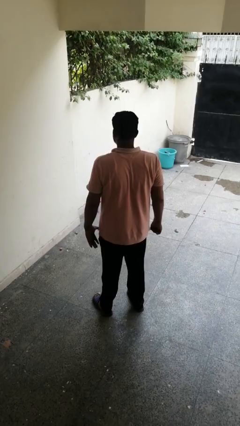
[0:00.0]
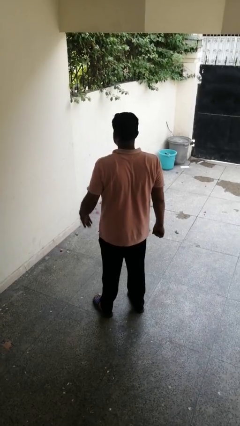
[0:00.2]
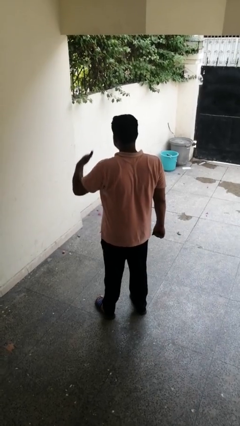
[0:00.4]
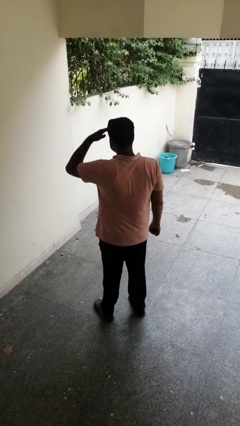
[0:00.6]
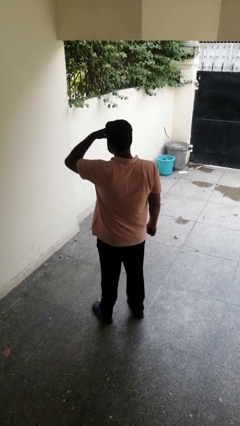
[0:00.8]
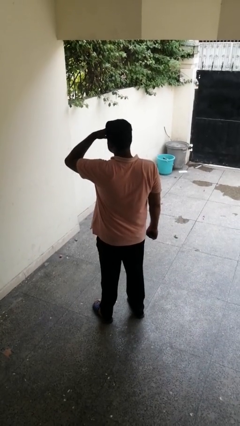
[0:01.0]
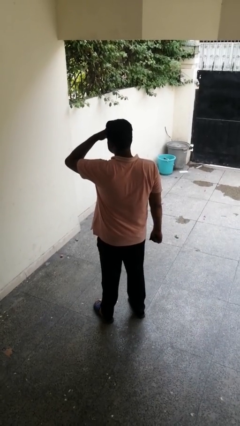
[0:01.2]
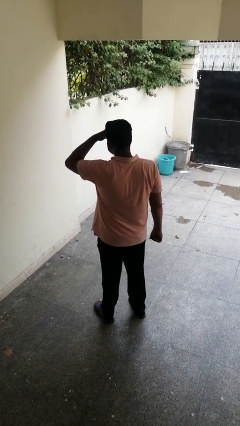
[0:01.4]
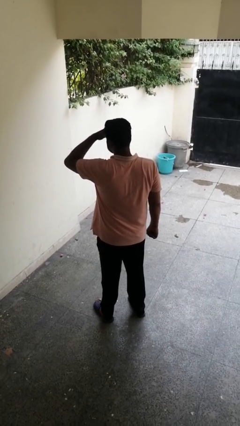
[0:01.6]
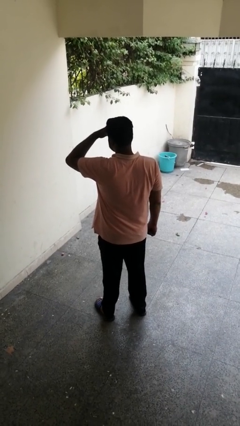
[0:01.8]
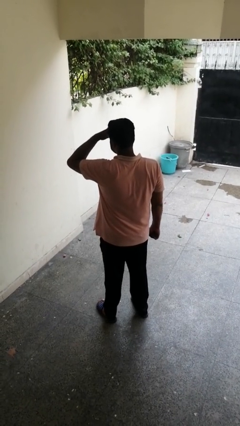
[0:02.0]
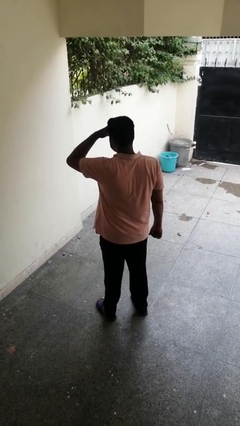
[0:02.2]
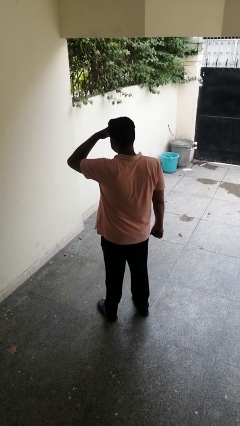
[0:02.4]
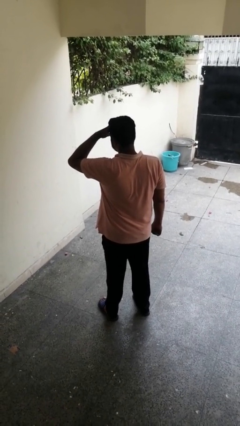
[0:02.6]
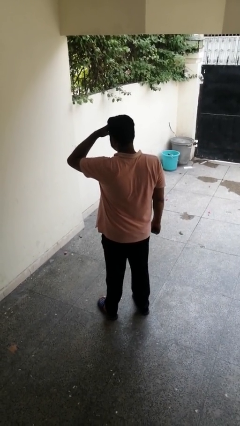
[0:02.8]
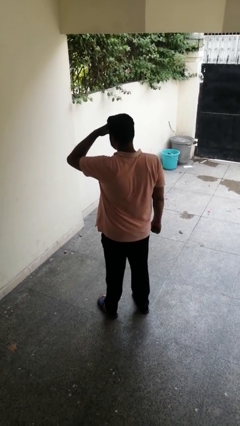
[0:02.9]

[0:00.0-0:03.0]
person shades eyes

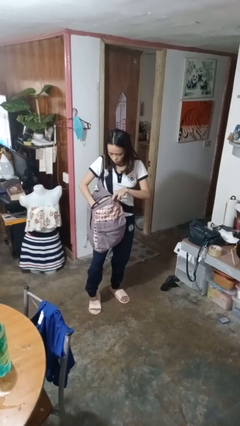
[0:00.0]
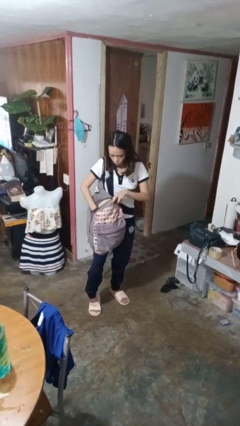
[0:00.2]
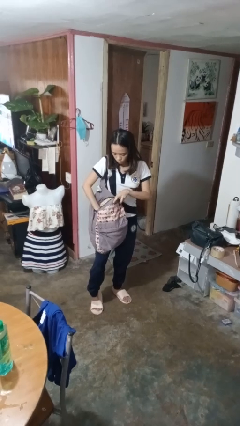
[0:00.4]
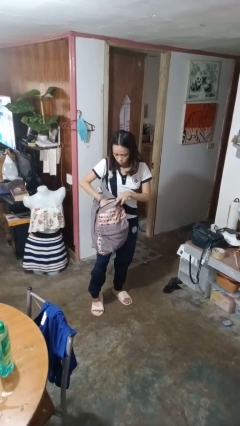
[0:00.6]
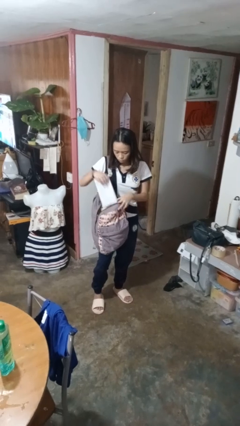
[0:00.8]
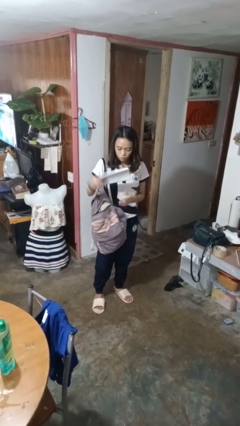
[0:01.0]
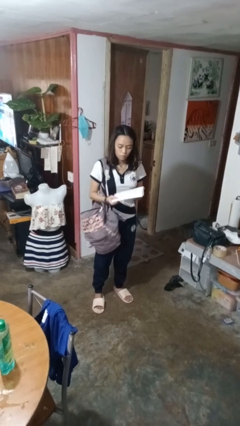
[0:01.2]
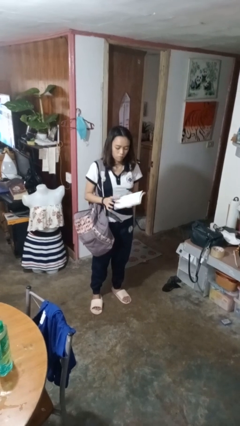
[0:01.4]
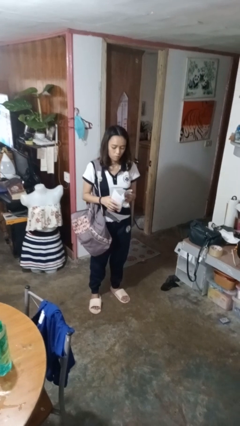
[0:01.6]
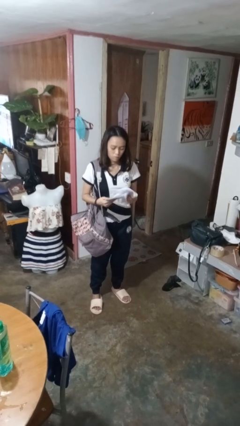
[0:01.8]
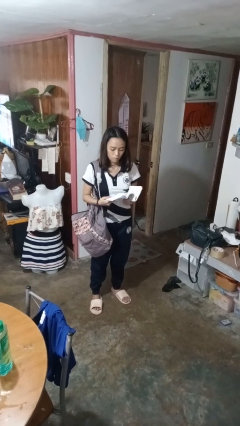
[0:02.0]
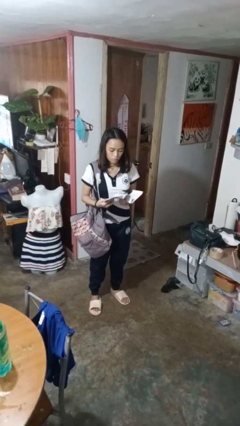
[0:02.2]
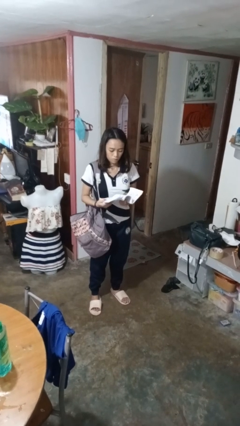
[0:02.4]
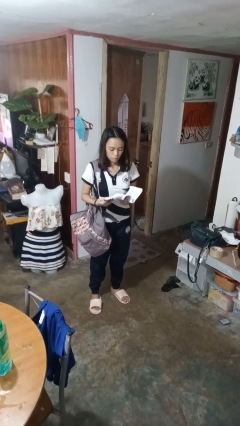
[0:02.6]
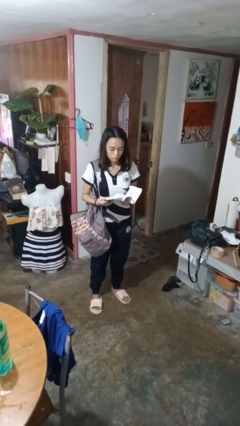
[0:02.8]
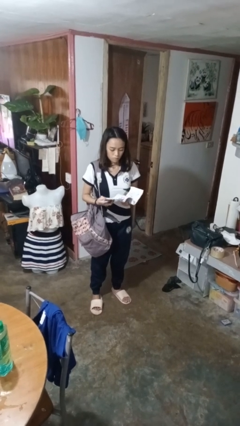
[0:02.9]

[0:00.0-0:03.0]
person takes object from backpack

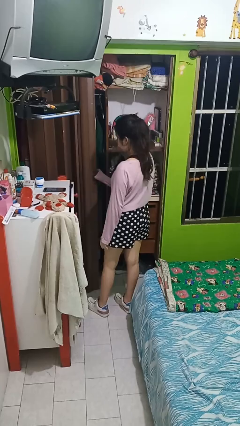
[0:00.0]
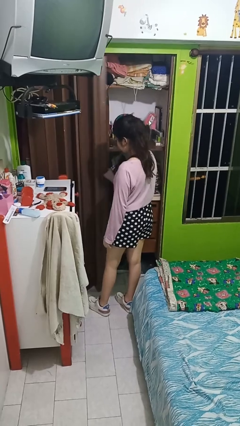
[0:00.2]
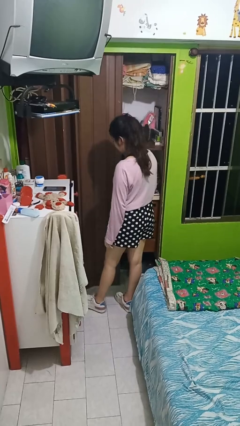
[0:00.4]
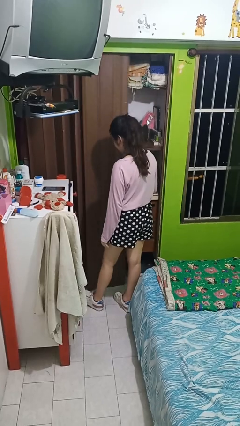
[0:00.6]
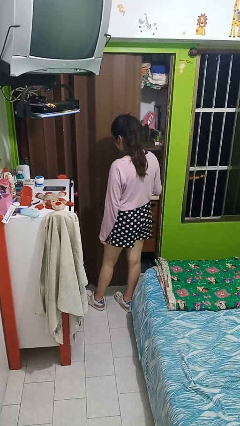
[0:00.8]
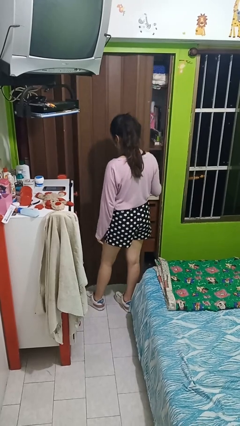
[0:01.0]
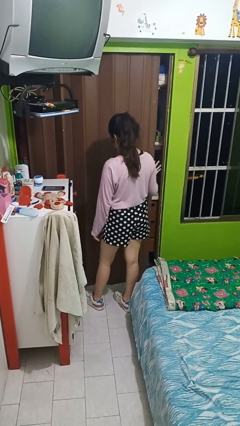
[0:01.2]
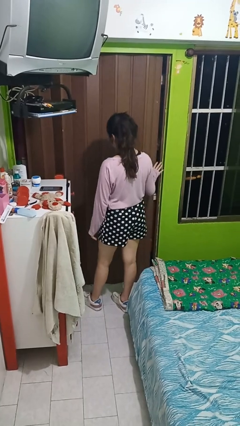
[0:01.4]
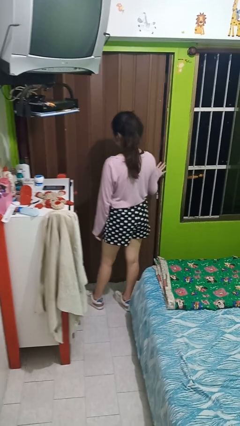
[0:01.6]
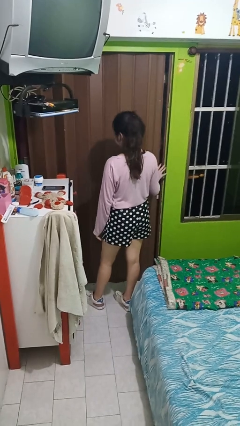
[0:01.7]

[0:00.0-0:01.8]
person closes sliding door

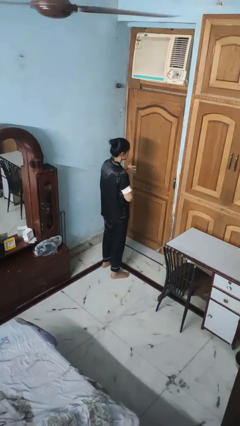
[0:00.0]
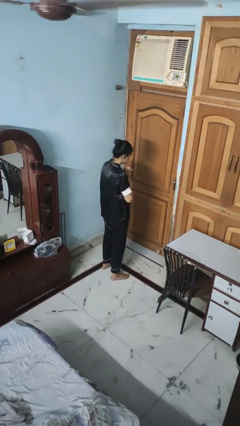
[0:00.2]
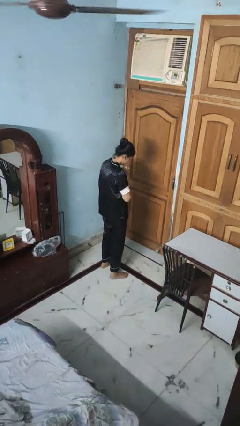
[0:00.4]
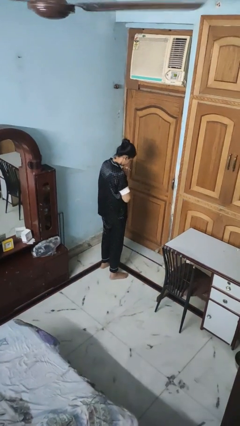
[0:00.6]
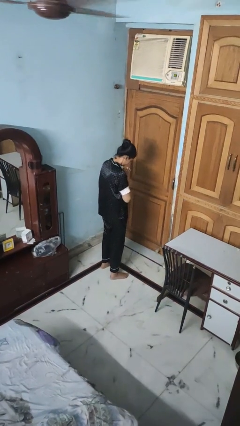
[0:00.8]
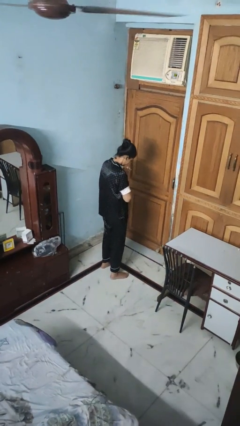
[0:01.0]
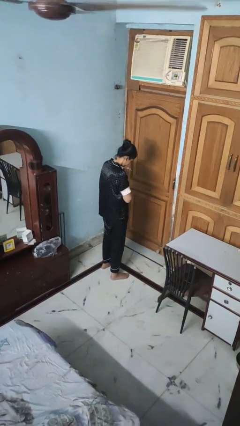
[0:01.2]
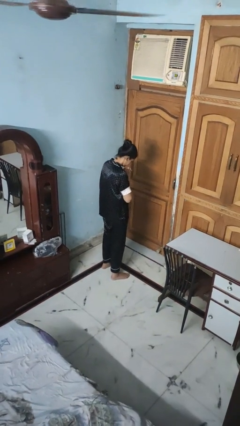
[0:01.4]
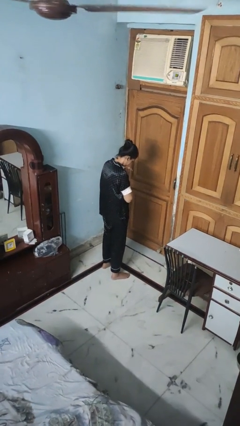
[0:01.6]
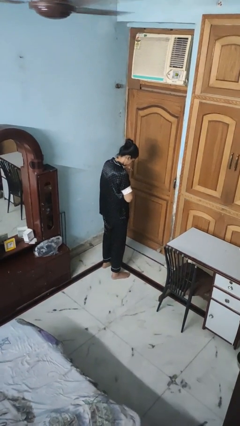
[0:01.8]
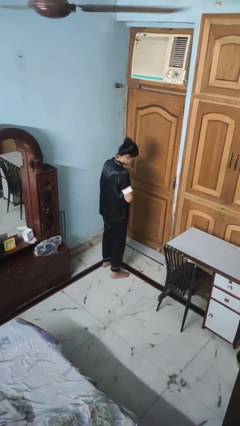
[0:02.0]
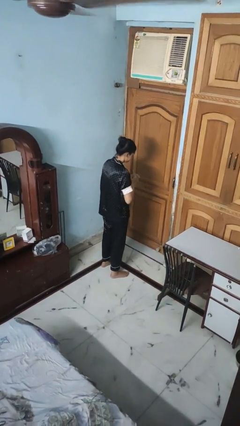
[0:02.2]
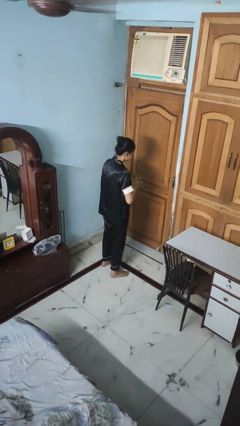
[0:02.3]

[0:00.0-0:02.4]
person prays

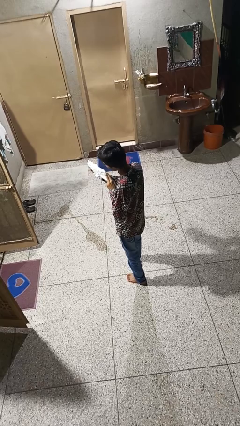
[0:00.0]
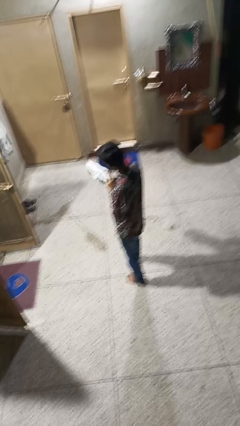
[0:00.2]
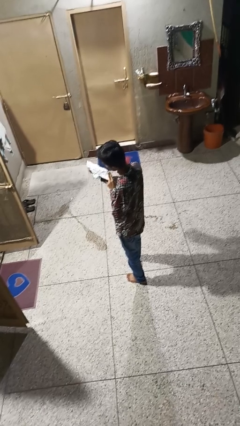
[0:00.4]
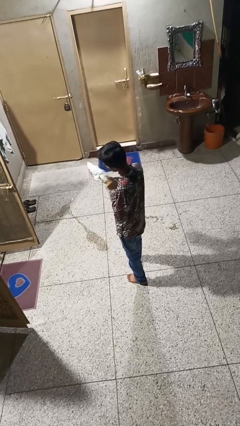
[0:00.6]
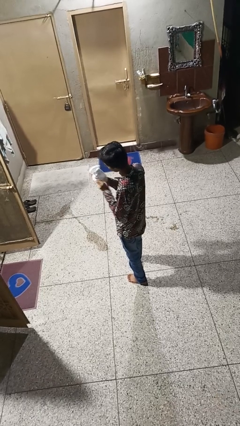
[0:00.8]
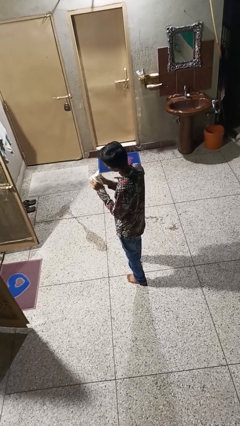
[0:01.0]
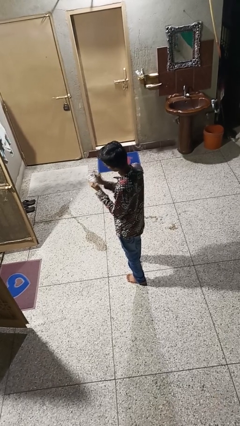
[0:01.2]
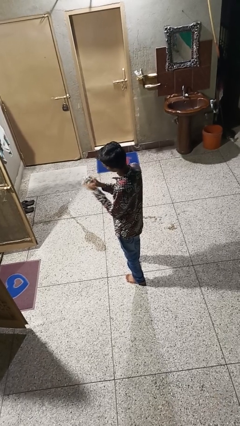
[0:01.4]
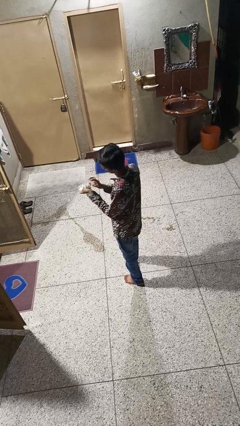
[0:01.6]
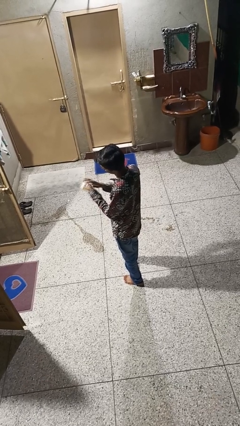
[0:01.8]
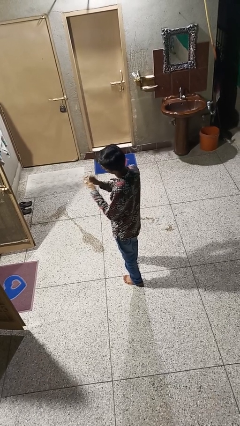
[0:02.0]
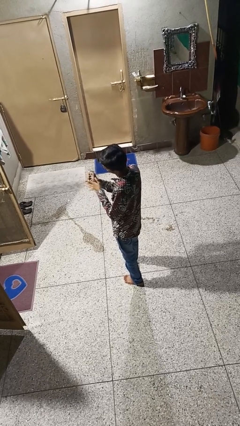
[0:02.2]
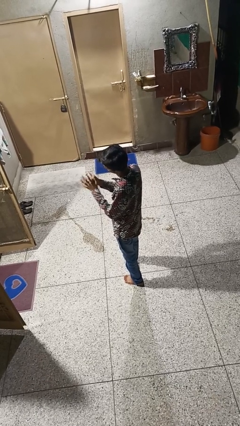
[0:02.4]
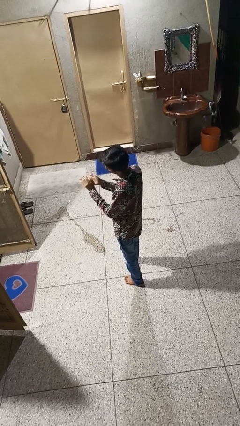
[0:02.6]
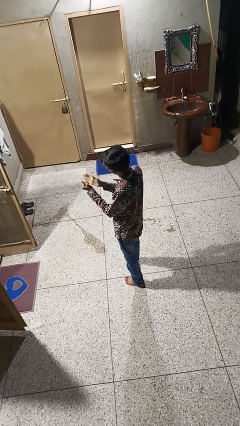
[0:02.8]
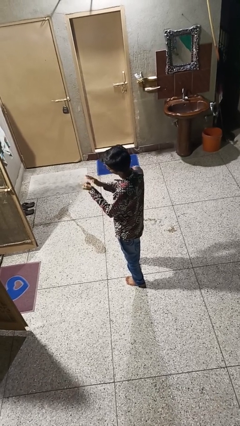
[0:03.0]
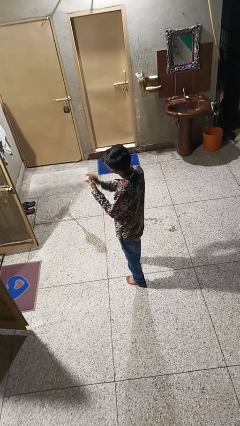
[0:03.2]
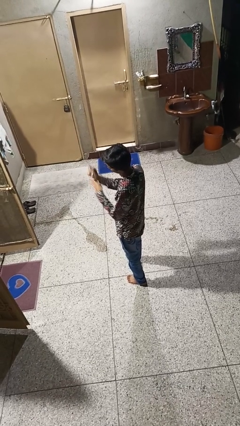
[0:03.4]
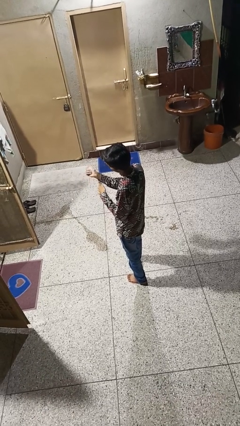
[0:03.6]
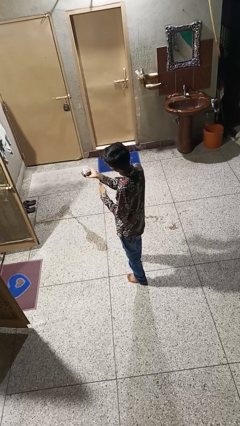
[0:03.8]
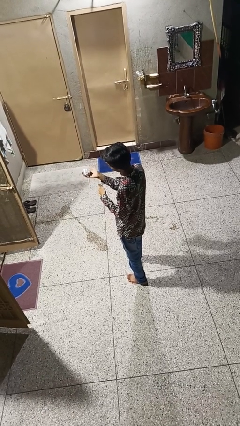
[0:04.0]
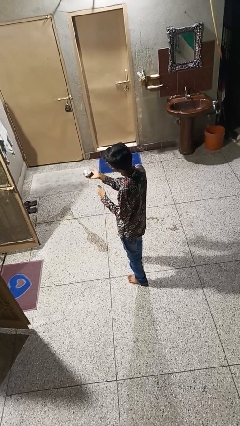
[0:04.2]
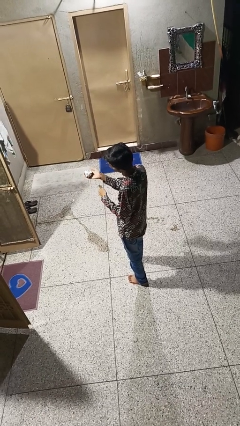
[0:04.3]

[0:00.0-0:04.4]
person crumples paper

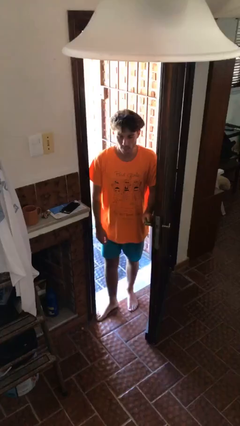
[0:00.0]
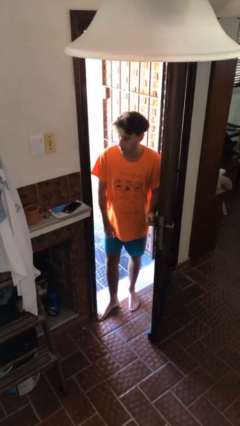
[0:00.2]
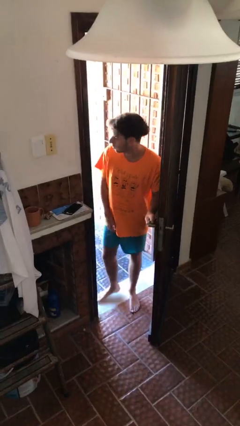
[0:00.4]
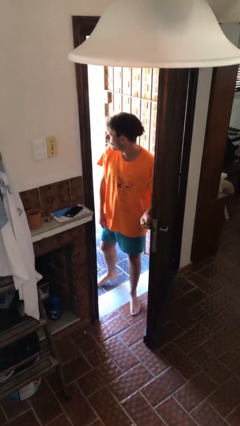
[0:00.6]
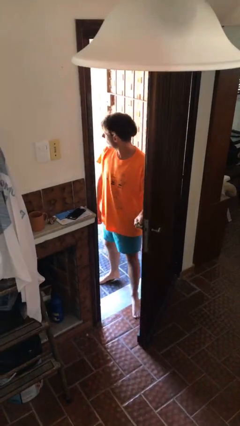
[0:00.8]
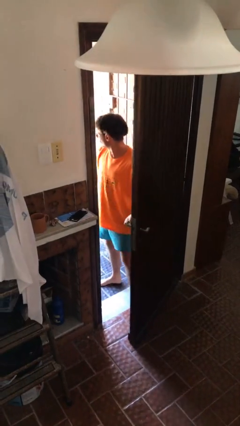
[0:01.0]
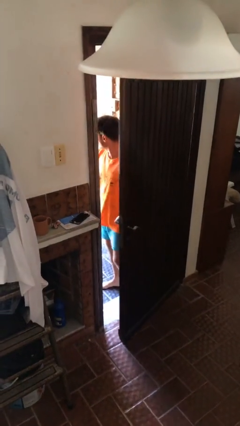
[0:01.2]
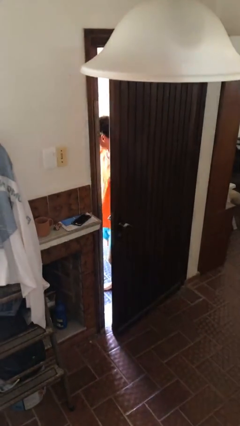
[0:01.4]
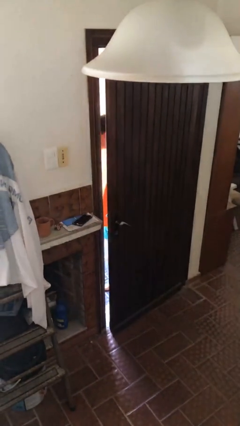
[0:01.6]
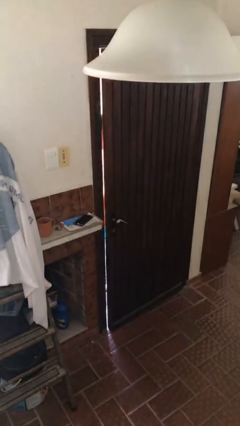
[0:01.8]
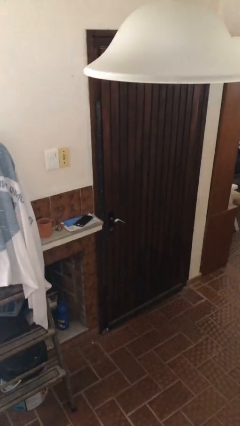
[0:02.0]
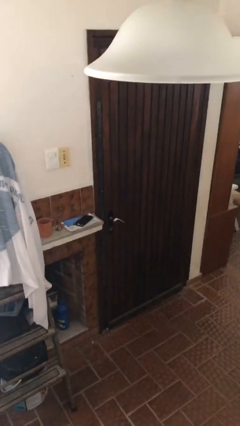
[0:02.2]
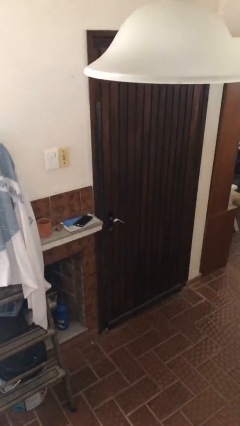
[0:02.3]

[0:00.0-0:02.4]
person closes facility door
